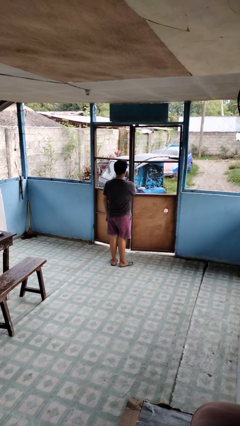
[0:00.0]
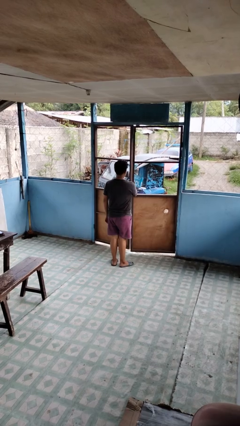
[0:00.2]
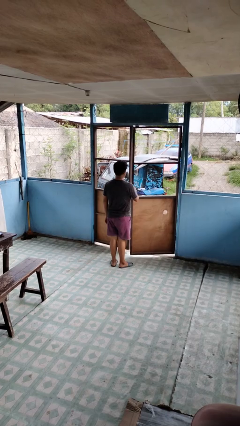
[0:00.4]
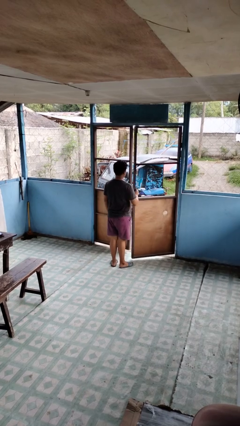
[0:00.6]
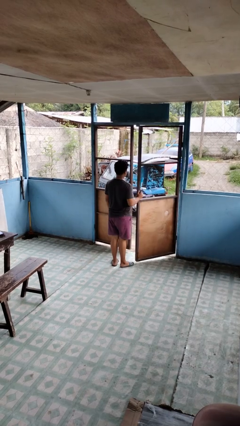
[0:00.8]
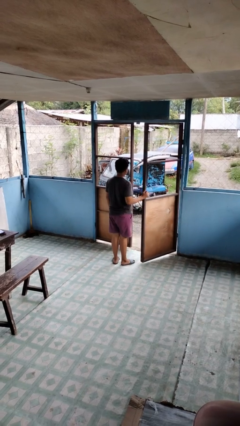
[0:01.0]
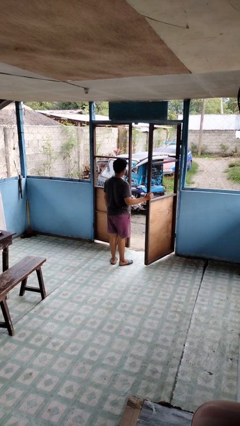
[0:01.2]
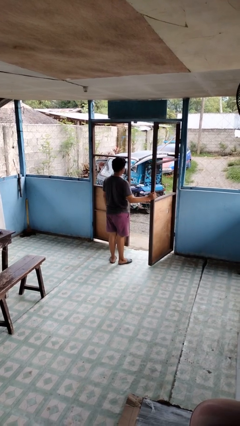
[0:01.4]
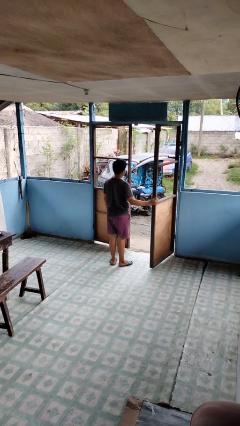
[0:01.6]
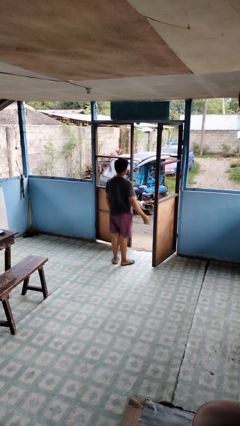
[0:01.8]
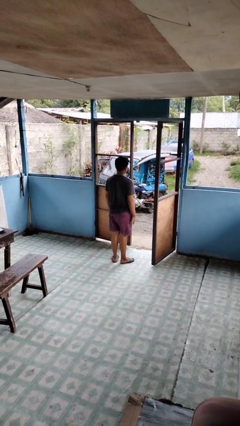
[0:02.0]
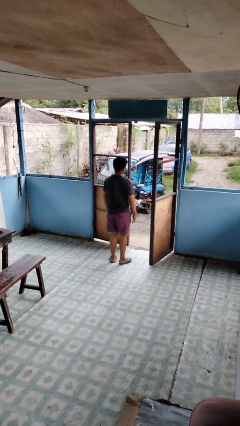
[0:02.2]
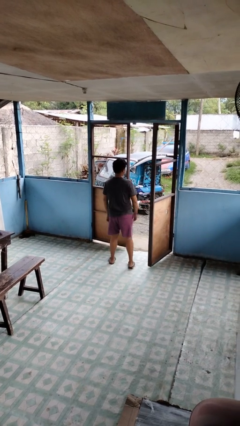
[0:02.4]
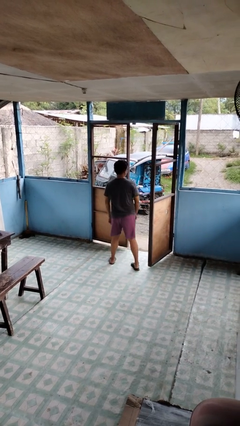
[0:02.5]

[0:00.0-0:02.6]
person opens facility door

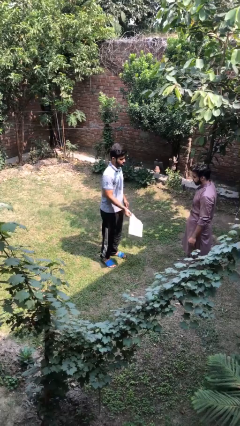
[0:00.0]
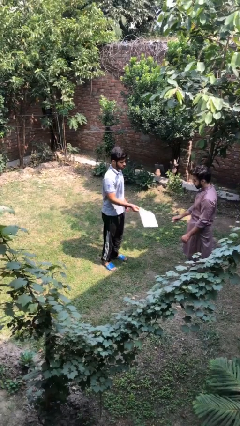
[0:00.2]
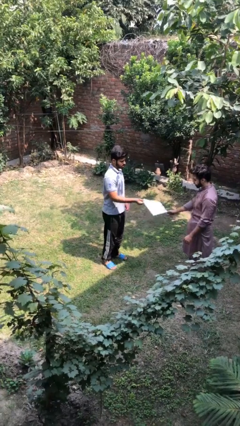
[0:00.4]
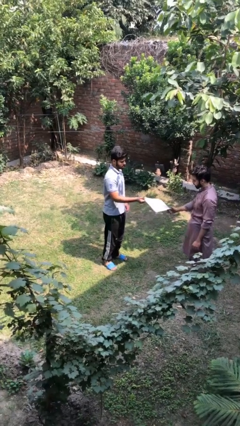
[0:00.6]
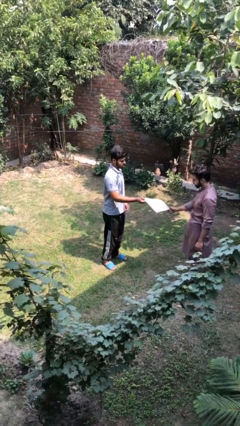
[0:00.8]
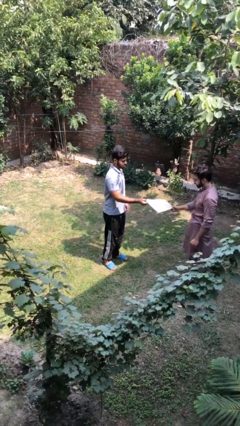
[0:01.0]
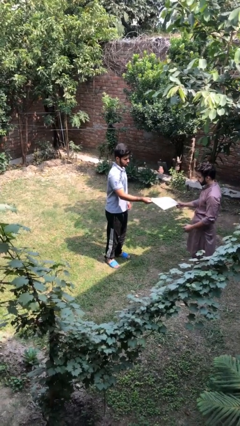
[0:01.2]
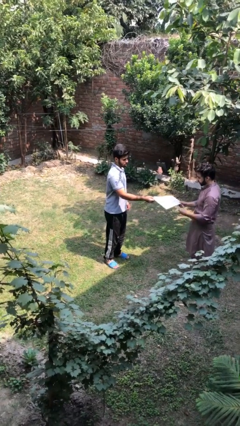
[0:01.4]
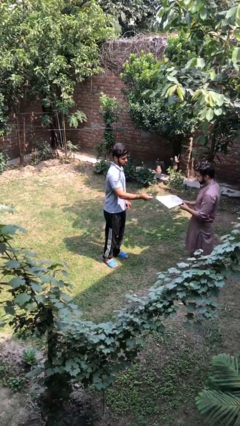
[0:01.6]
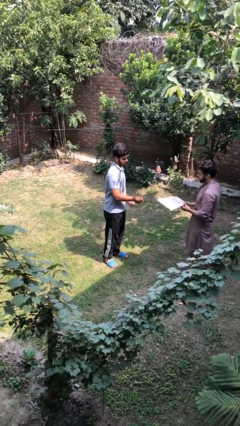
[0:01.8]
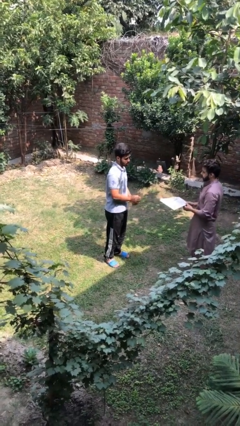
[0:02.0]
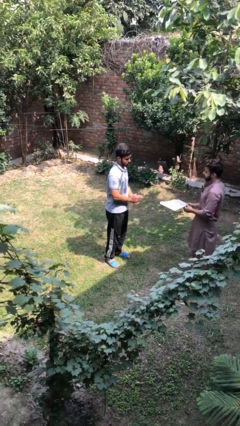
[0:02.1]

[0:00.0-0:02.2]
person transfers object to person

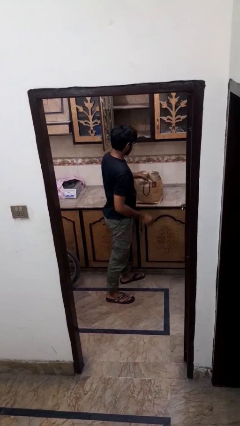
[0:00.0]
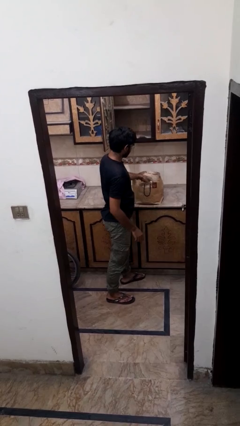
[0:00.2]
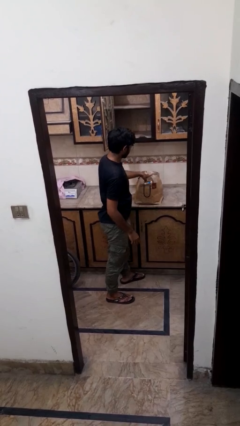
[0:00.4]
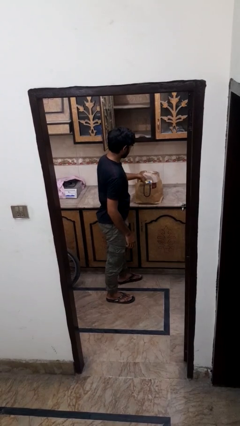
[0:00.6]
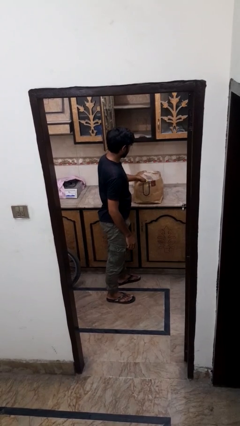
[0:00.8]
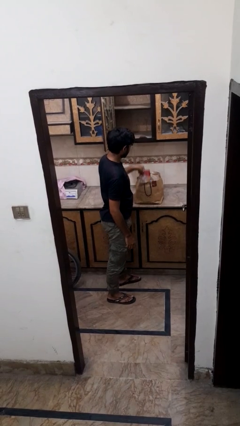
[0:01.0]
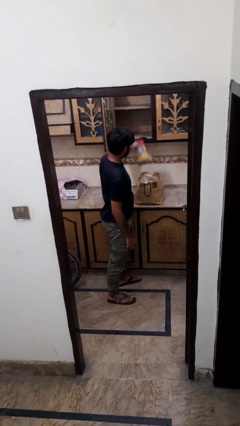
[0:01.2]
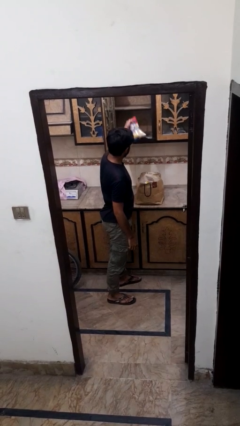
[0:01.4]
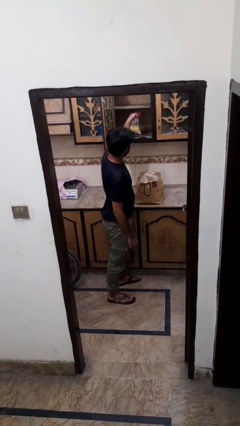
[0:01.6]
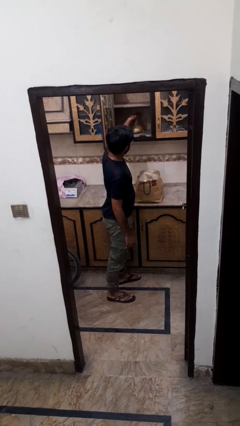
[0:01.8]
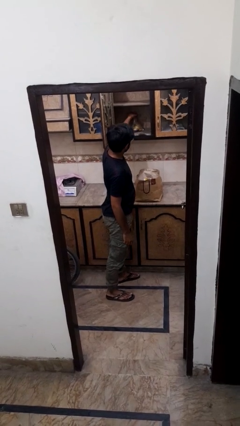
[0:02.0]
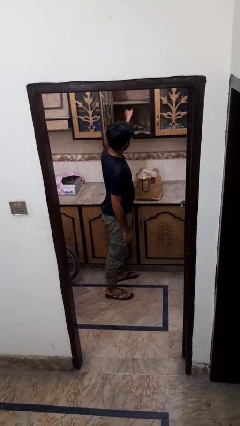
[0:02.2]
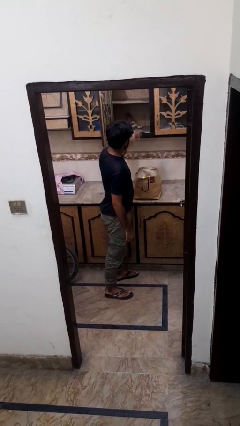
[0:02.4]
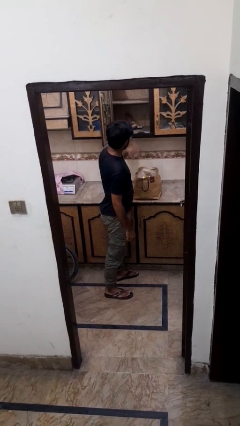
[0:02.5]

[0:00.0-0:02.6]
person loads groceries into cabinet

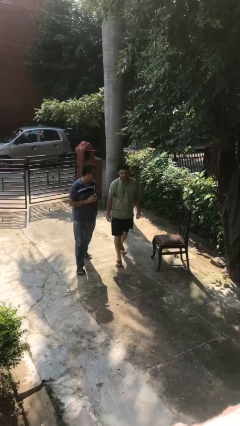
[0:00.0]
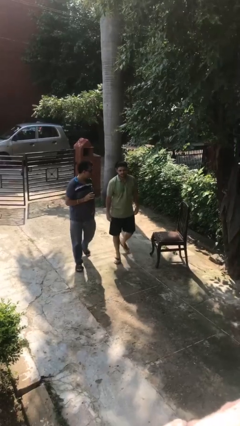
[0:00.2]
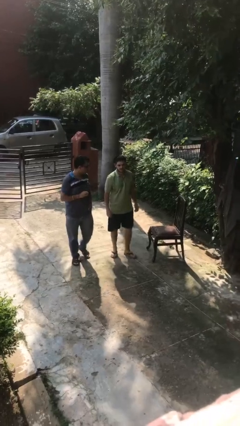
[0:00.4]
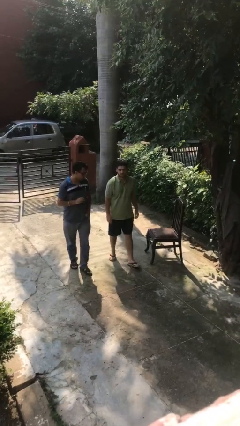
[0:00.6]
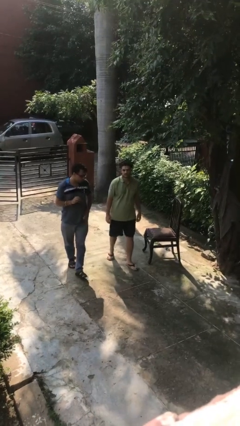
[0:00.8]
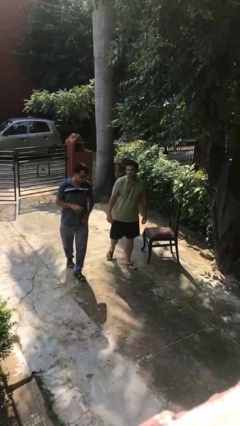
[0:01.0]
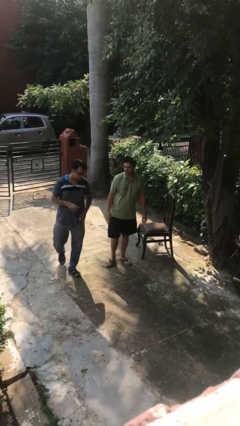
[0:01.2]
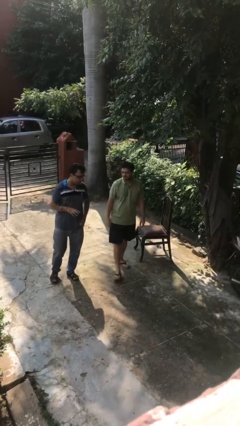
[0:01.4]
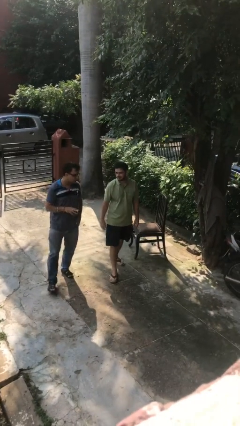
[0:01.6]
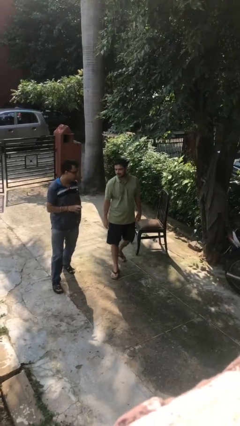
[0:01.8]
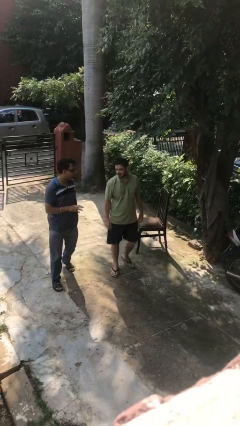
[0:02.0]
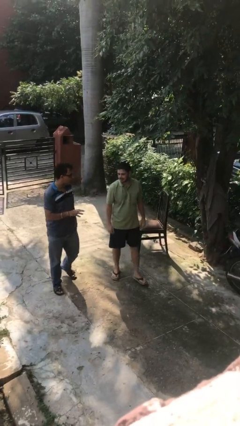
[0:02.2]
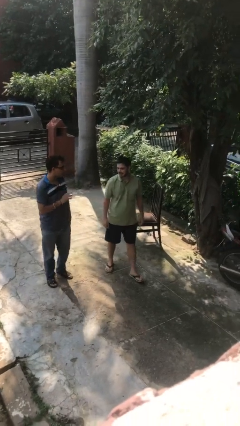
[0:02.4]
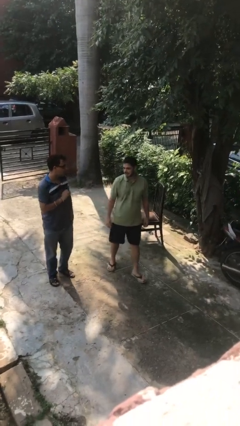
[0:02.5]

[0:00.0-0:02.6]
person talks to person

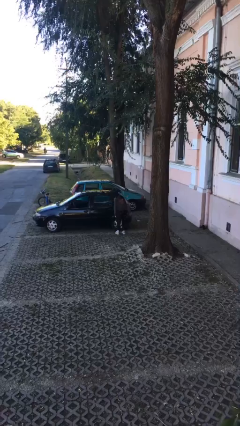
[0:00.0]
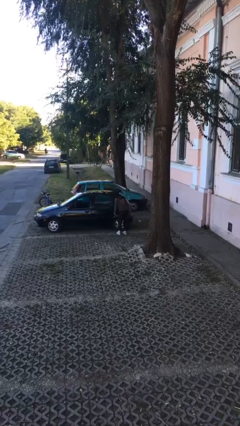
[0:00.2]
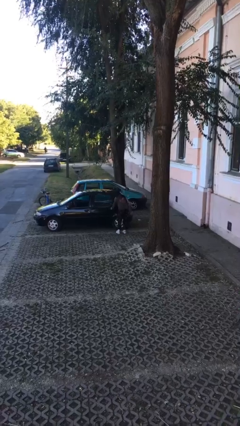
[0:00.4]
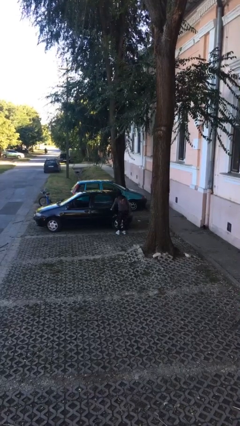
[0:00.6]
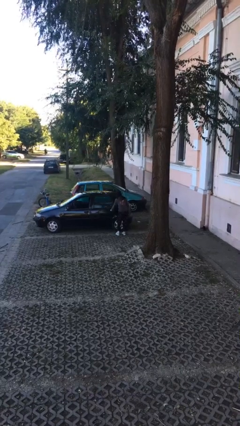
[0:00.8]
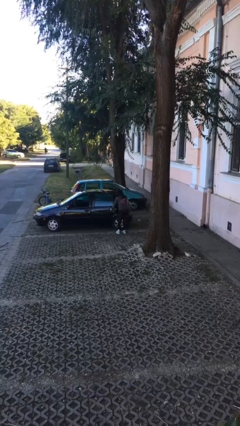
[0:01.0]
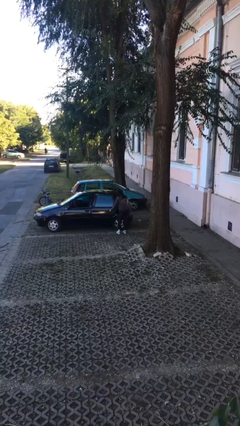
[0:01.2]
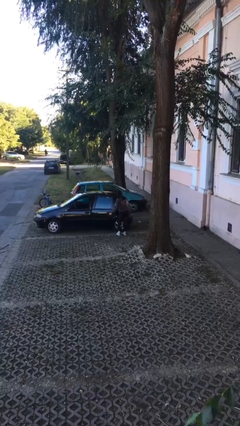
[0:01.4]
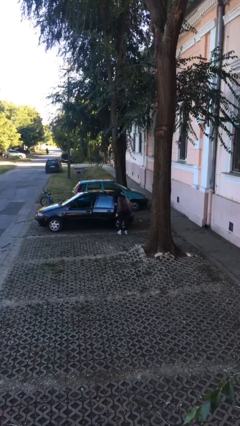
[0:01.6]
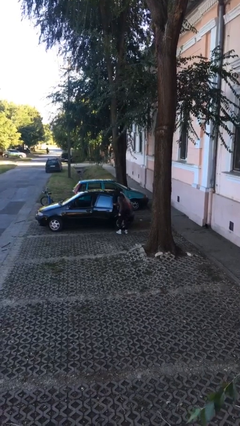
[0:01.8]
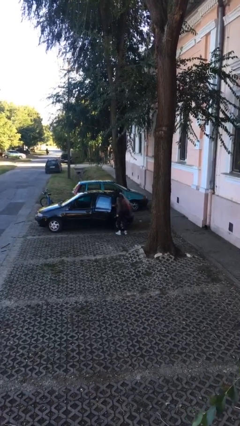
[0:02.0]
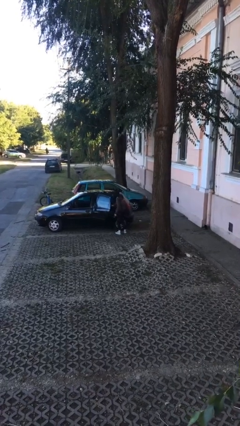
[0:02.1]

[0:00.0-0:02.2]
person opens car door

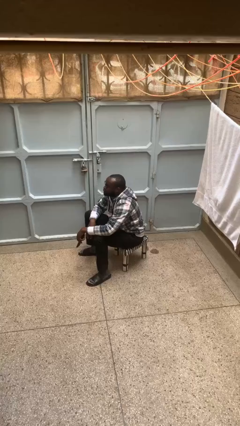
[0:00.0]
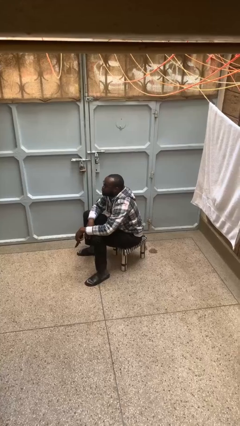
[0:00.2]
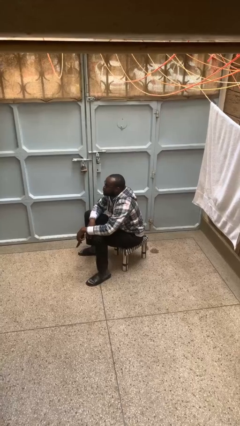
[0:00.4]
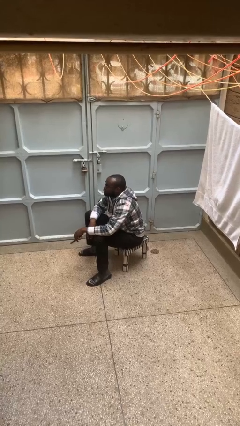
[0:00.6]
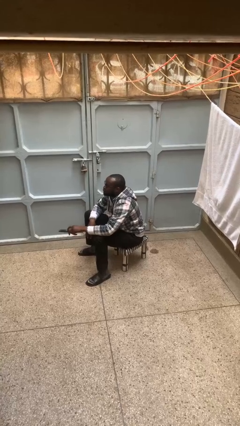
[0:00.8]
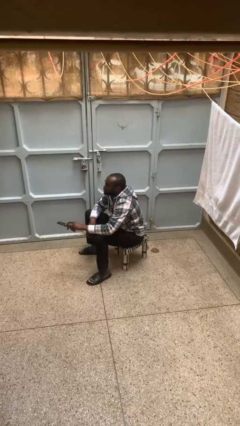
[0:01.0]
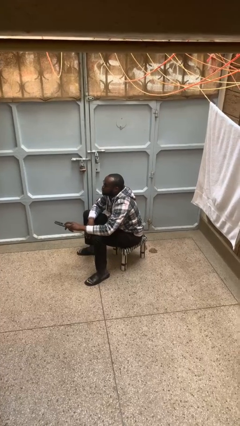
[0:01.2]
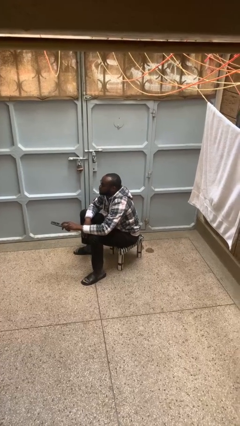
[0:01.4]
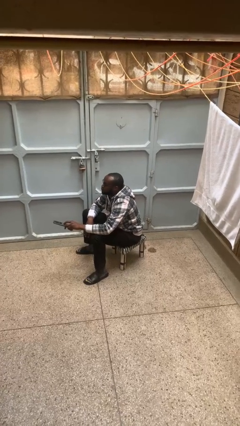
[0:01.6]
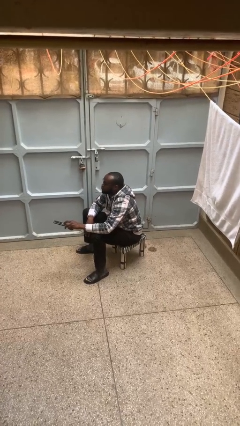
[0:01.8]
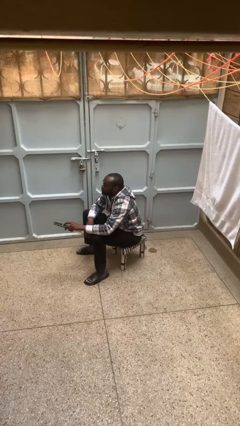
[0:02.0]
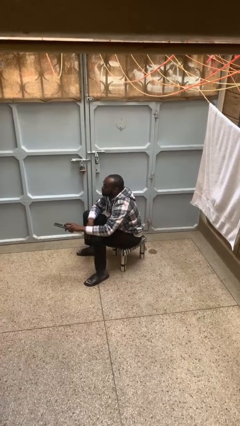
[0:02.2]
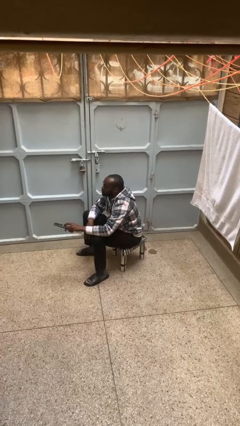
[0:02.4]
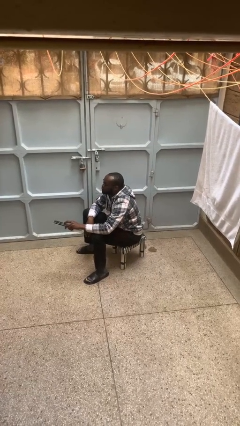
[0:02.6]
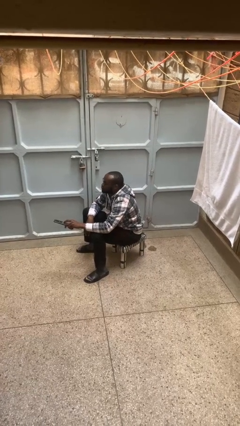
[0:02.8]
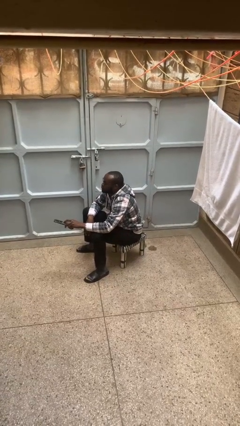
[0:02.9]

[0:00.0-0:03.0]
person uses television remote

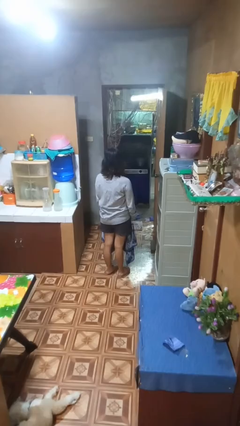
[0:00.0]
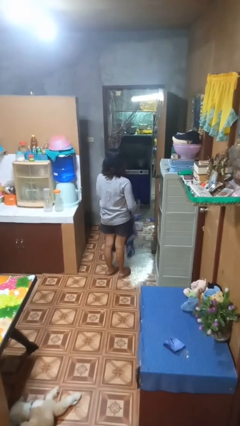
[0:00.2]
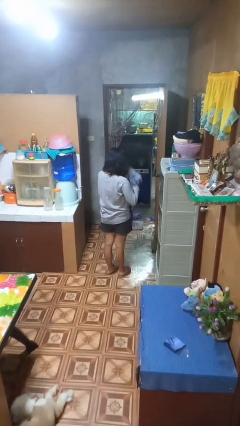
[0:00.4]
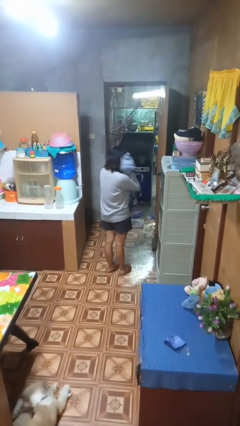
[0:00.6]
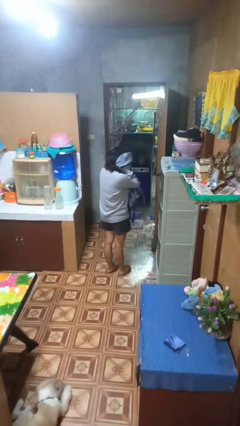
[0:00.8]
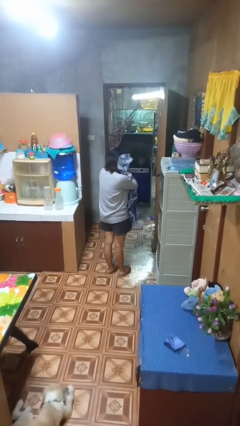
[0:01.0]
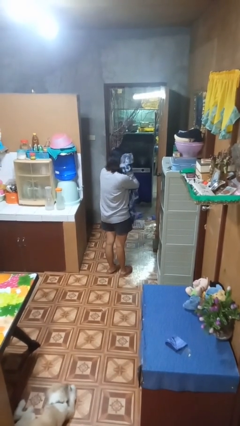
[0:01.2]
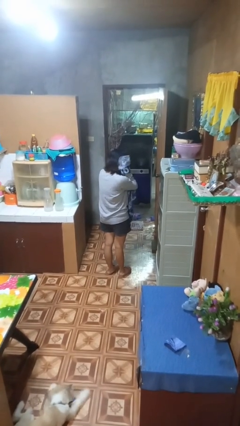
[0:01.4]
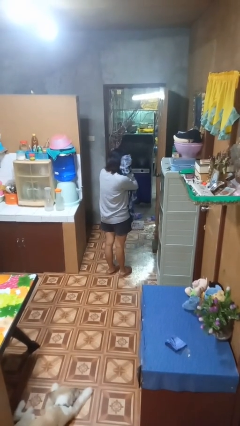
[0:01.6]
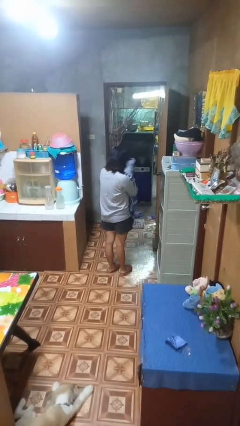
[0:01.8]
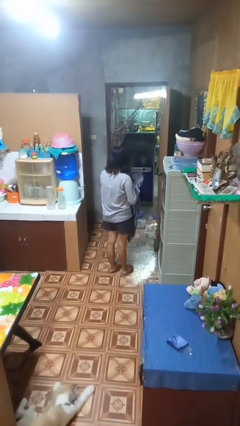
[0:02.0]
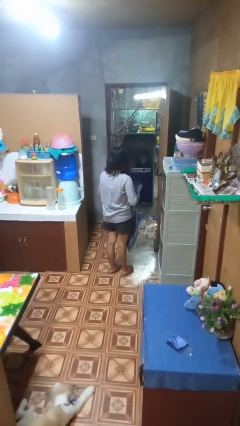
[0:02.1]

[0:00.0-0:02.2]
person dries hair with towel
